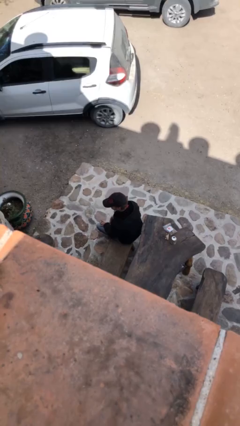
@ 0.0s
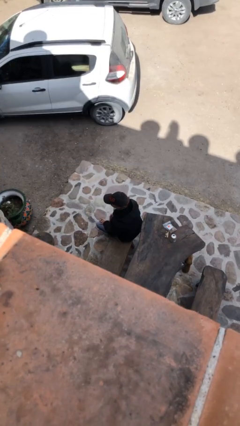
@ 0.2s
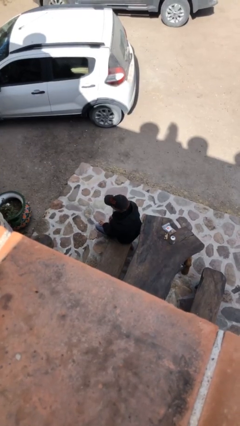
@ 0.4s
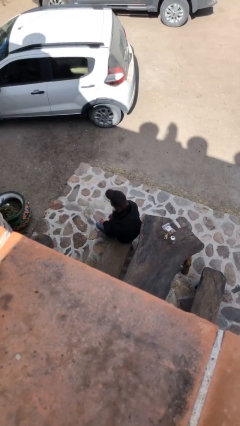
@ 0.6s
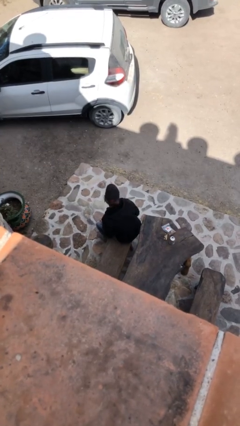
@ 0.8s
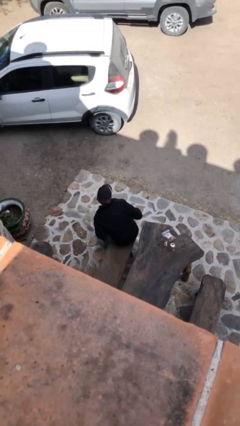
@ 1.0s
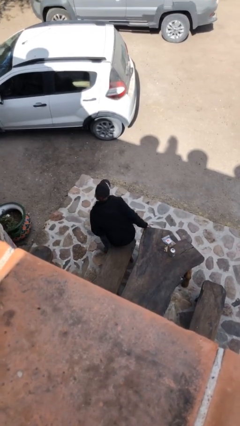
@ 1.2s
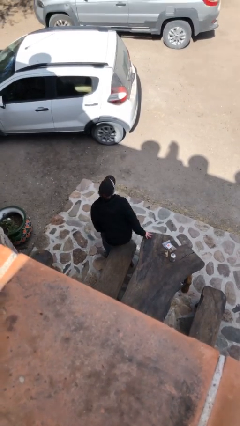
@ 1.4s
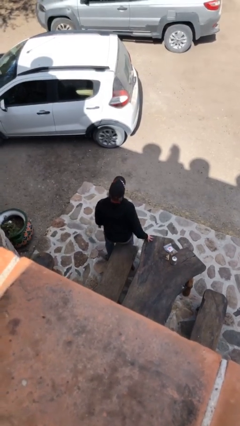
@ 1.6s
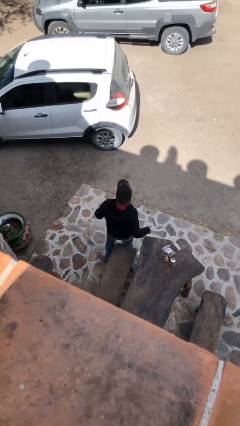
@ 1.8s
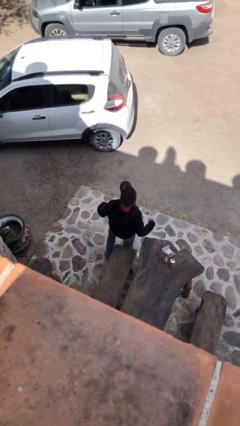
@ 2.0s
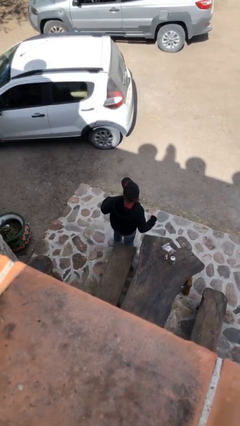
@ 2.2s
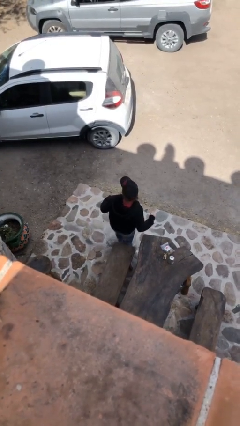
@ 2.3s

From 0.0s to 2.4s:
person stands up

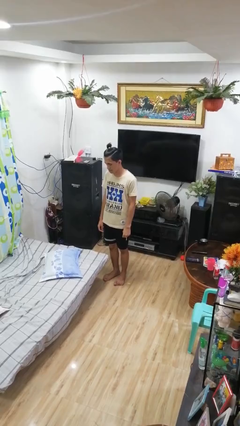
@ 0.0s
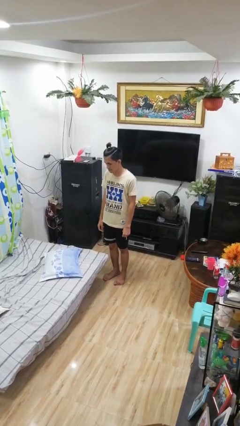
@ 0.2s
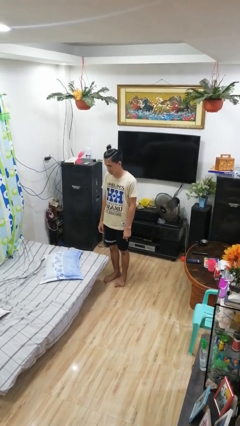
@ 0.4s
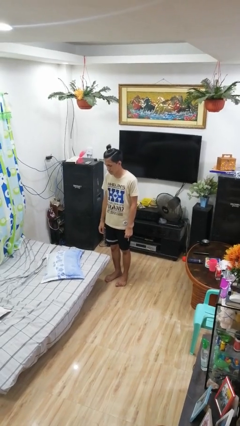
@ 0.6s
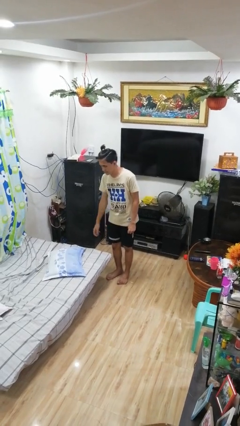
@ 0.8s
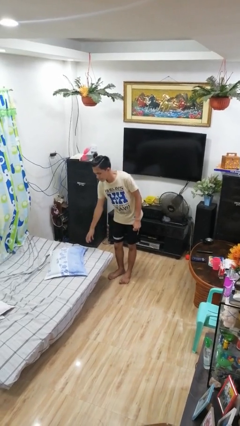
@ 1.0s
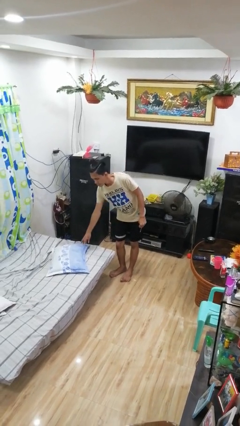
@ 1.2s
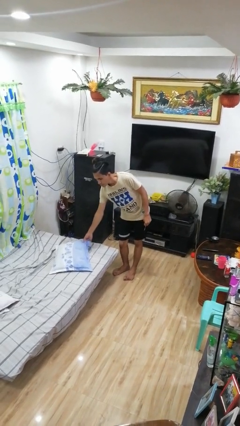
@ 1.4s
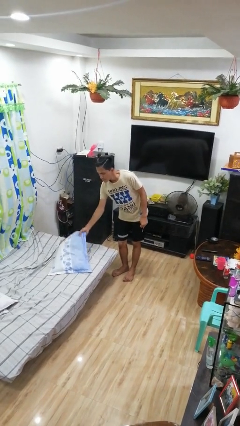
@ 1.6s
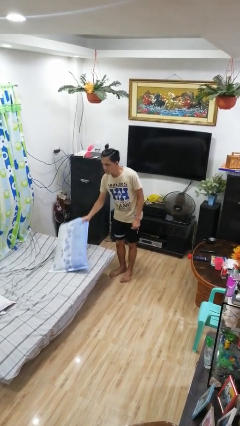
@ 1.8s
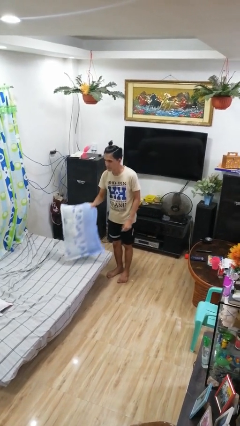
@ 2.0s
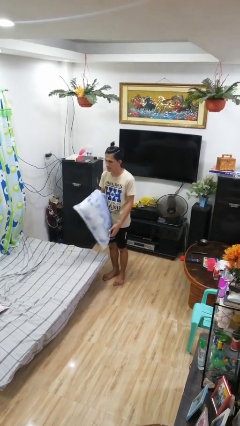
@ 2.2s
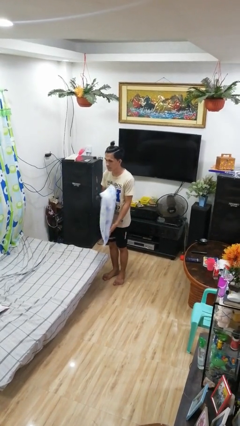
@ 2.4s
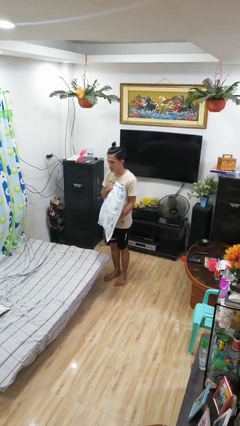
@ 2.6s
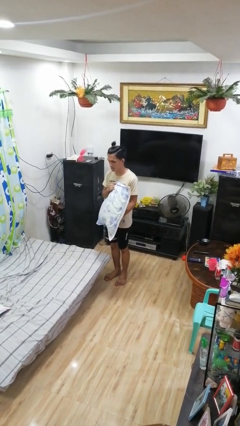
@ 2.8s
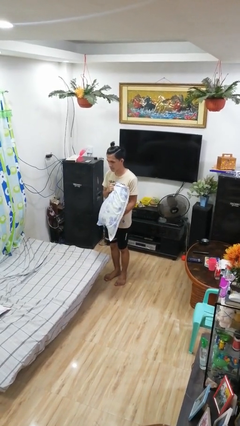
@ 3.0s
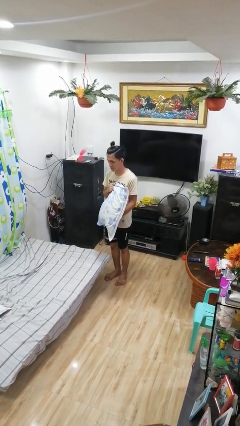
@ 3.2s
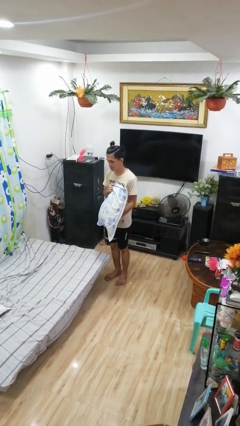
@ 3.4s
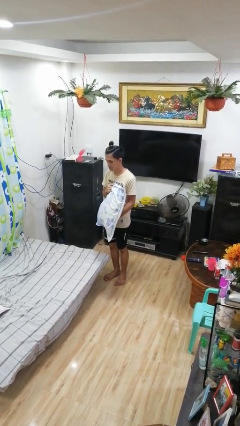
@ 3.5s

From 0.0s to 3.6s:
person picks up object from bed

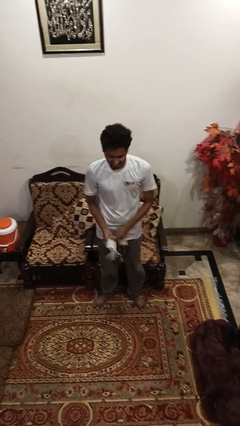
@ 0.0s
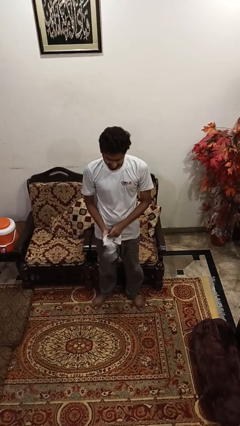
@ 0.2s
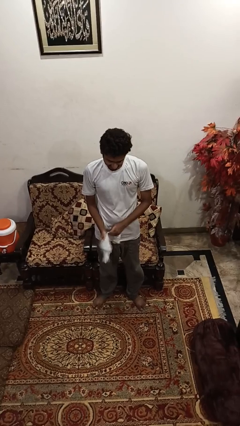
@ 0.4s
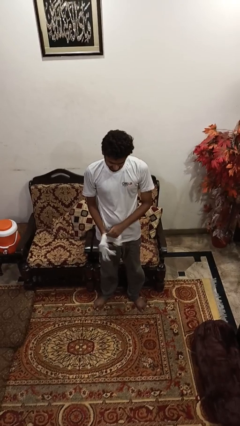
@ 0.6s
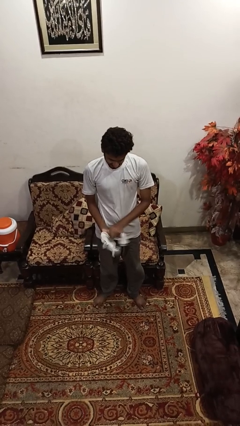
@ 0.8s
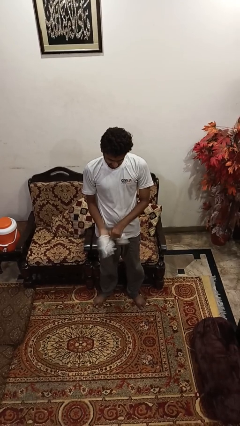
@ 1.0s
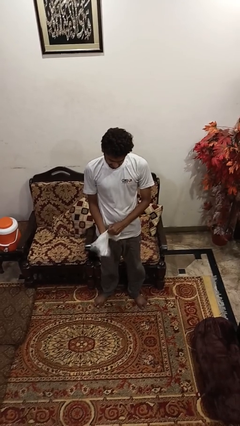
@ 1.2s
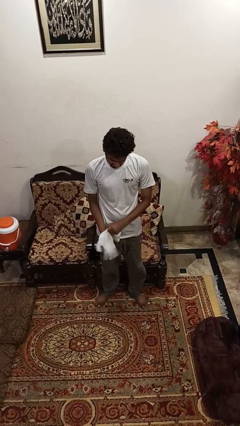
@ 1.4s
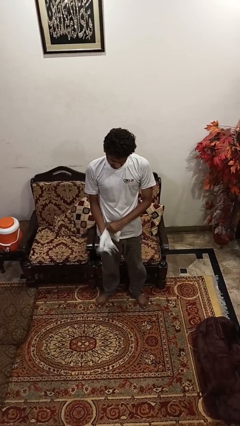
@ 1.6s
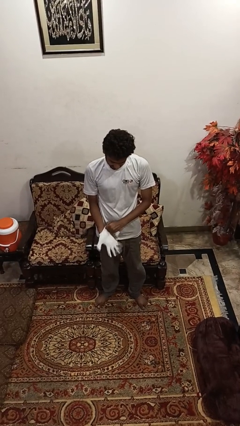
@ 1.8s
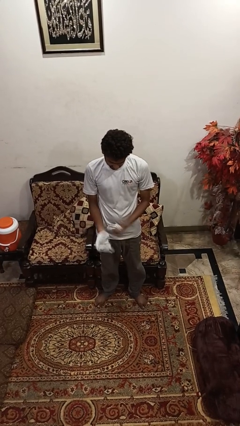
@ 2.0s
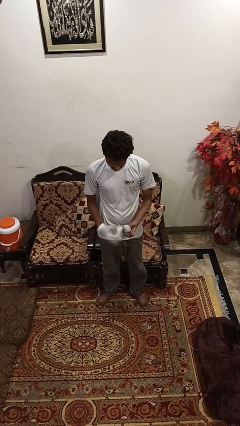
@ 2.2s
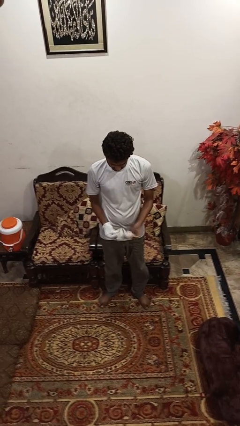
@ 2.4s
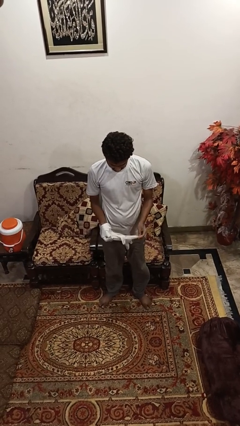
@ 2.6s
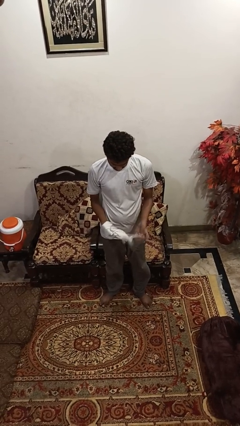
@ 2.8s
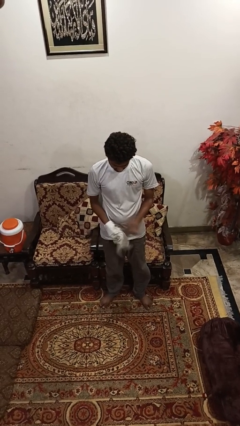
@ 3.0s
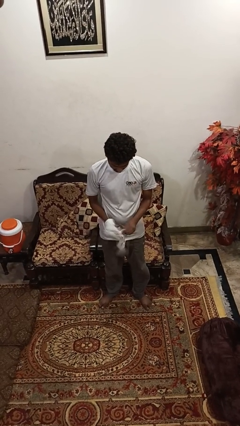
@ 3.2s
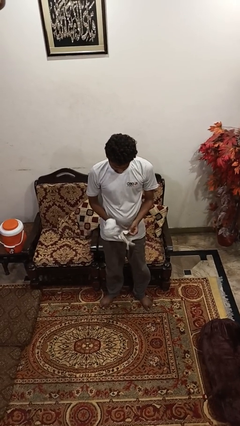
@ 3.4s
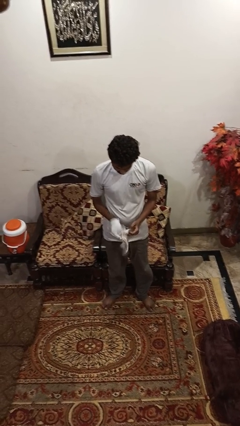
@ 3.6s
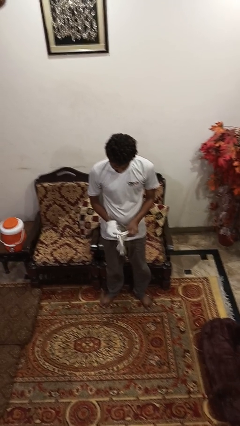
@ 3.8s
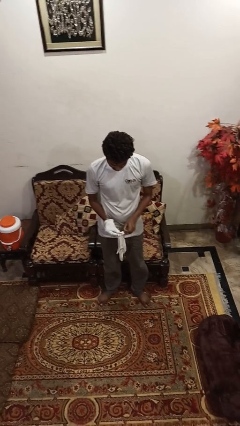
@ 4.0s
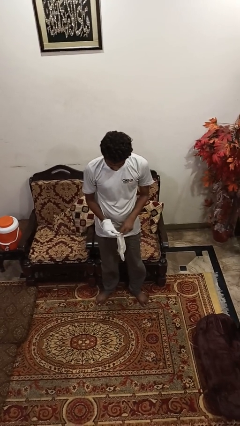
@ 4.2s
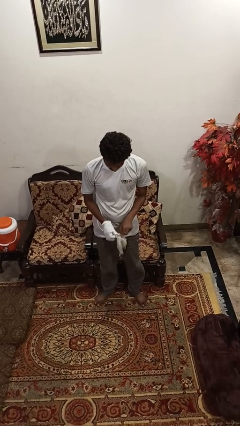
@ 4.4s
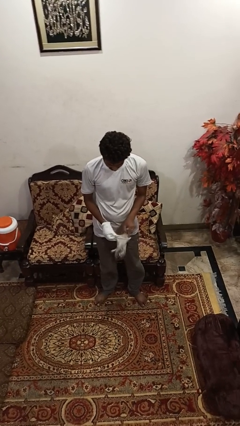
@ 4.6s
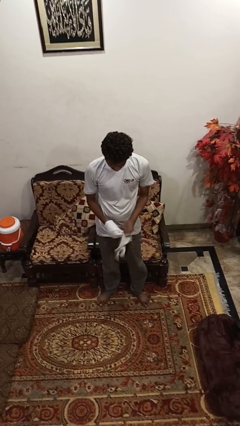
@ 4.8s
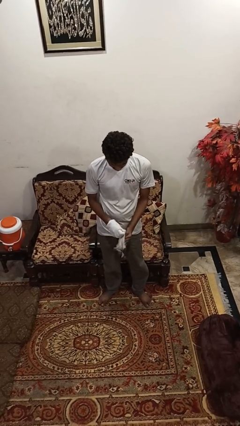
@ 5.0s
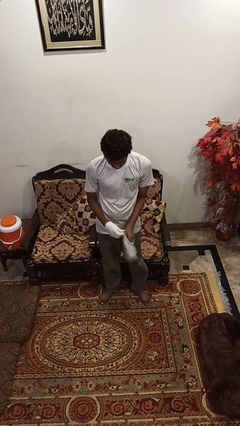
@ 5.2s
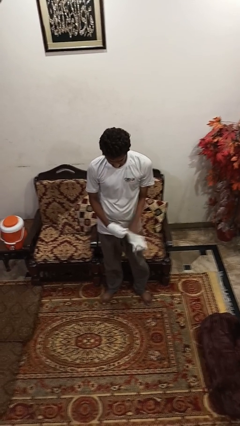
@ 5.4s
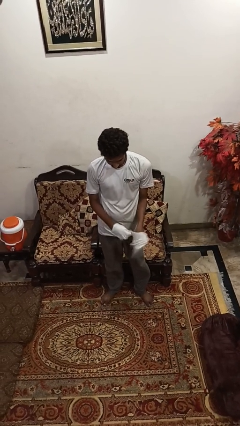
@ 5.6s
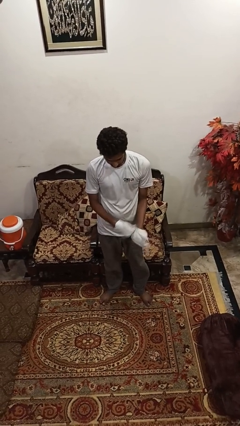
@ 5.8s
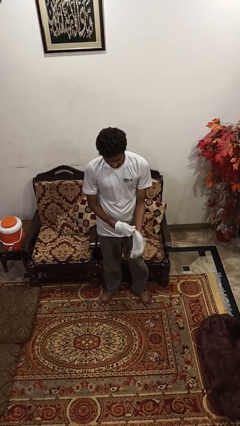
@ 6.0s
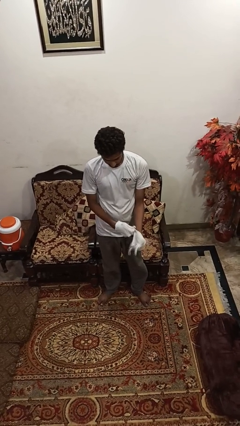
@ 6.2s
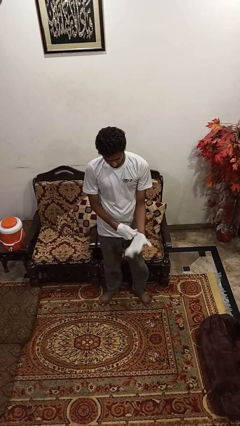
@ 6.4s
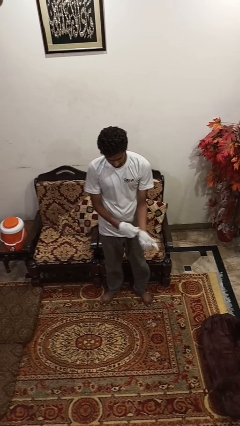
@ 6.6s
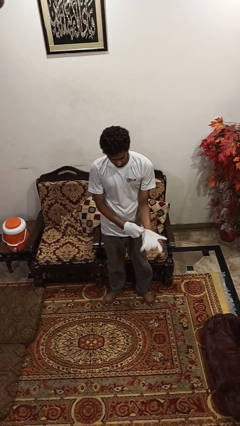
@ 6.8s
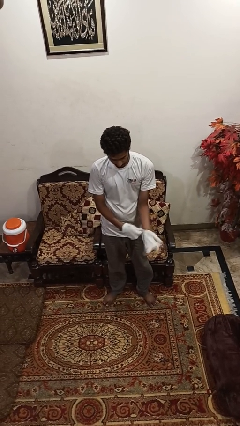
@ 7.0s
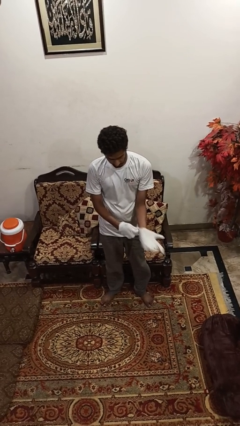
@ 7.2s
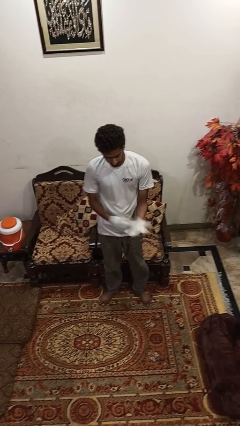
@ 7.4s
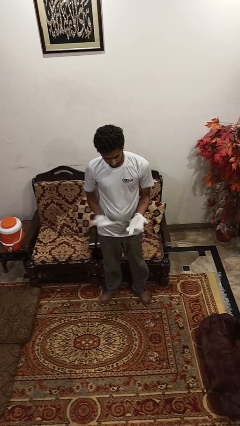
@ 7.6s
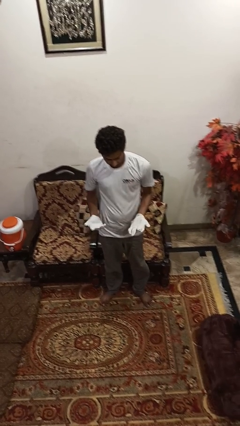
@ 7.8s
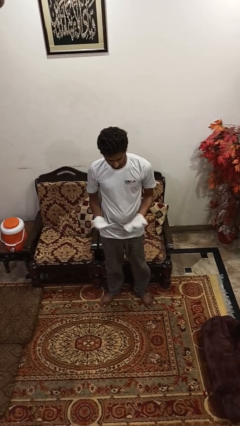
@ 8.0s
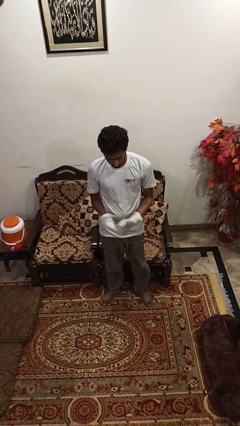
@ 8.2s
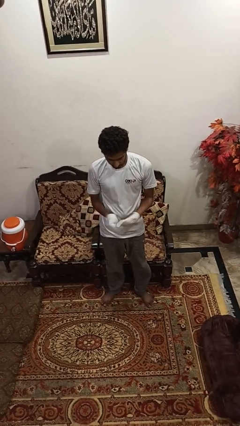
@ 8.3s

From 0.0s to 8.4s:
person puts on gloves

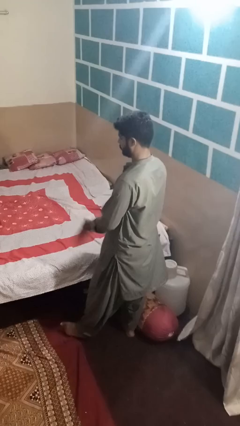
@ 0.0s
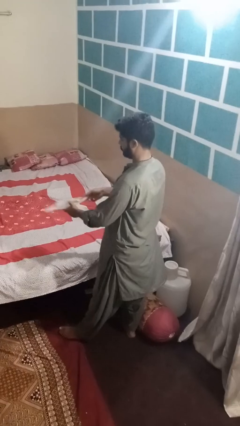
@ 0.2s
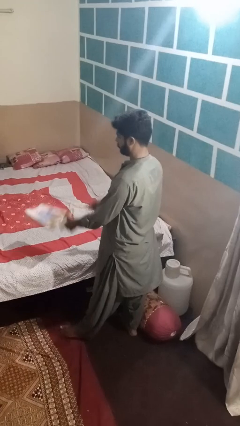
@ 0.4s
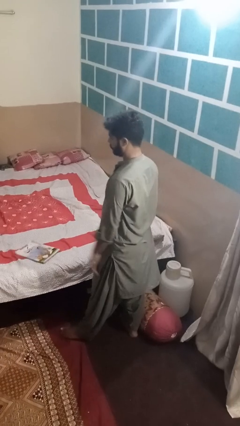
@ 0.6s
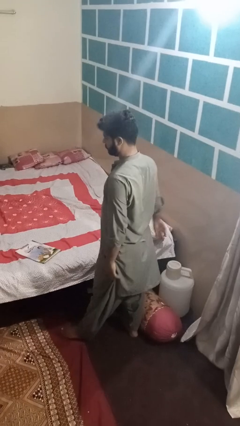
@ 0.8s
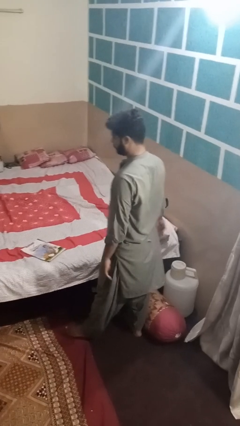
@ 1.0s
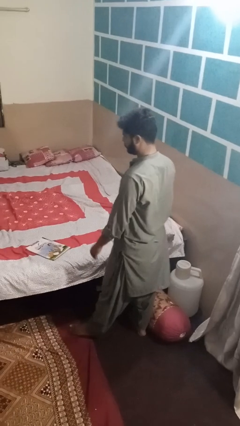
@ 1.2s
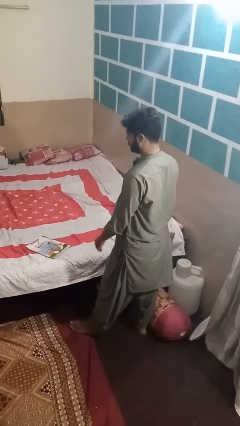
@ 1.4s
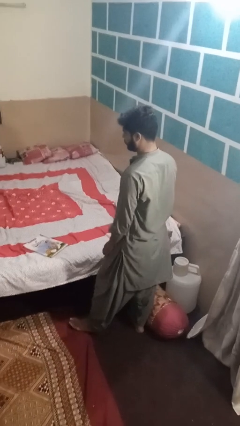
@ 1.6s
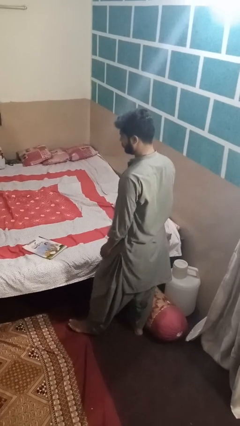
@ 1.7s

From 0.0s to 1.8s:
person throws object on bed

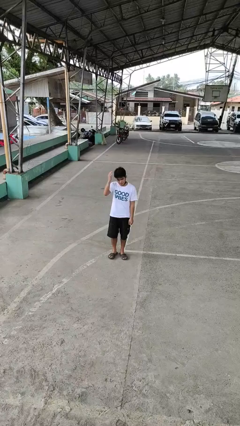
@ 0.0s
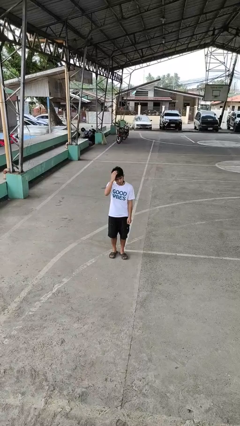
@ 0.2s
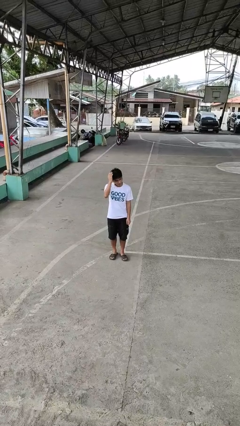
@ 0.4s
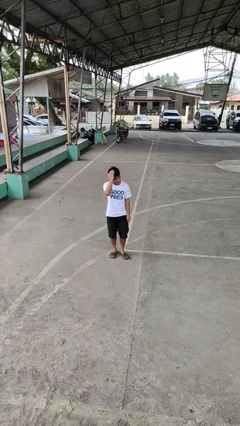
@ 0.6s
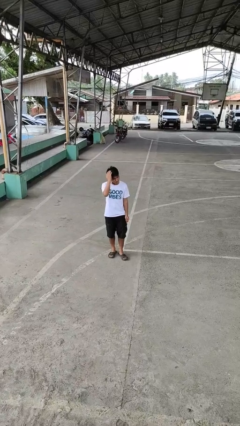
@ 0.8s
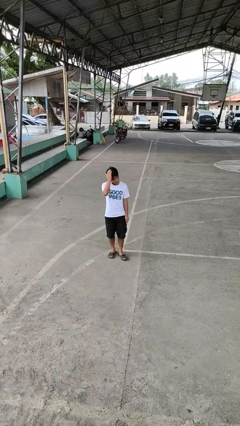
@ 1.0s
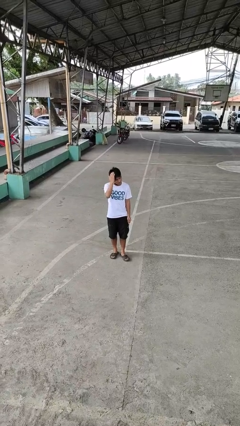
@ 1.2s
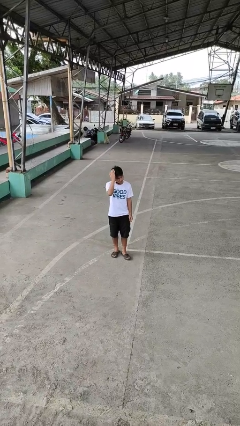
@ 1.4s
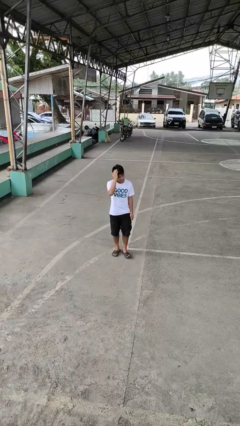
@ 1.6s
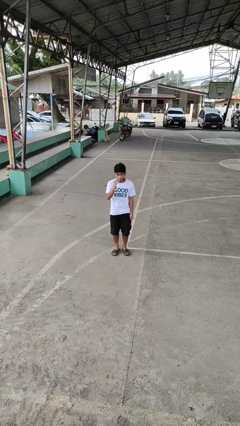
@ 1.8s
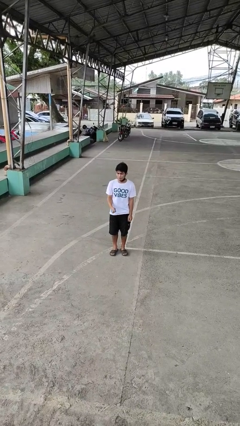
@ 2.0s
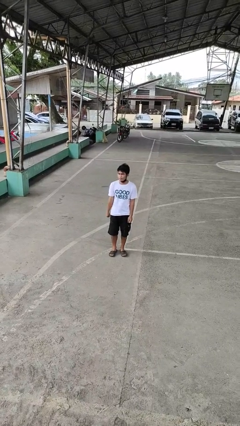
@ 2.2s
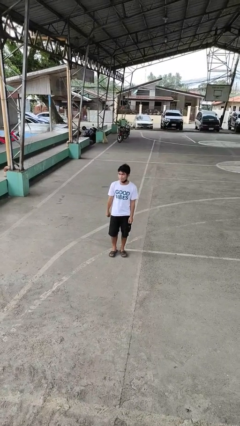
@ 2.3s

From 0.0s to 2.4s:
person pats head
